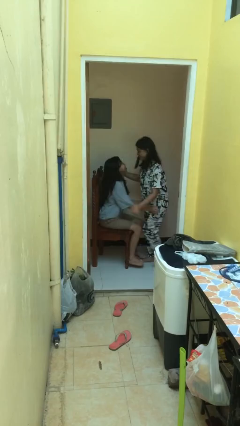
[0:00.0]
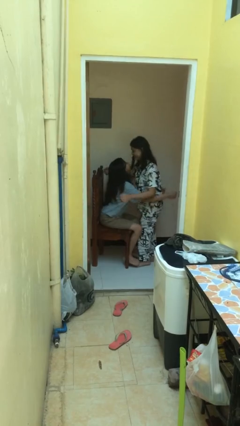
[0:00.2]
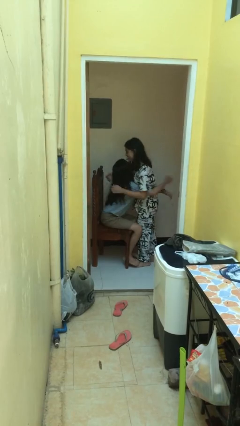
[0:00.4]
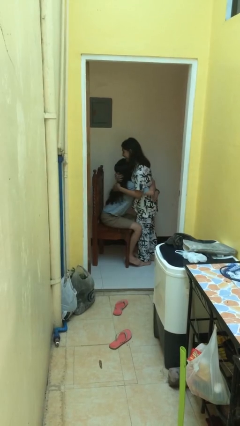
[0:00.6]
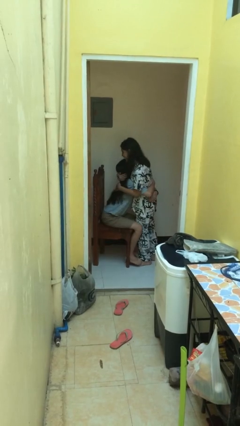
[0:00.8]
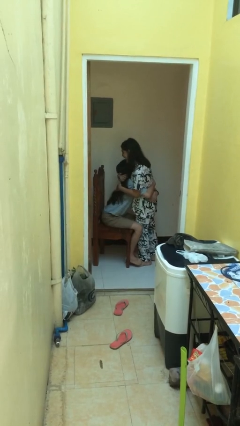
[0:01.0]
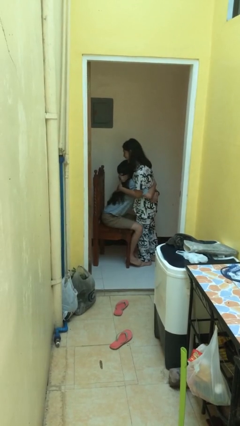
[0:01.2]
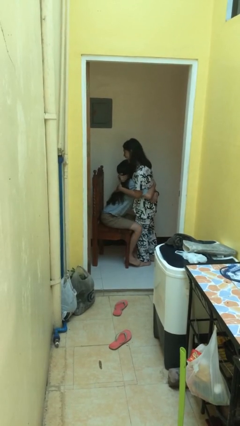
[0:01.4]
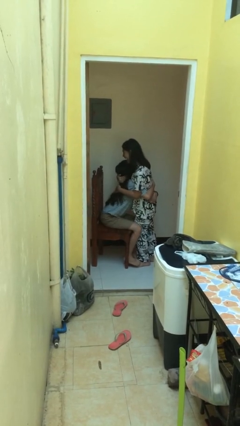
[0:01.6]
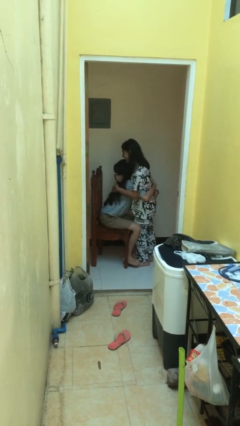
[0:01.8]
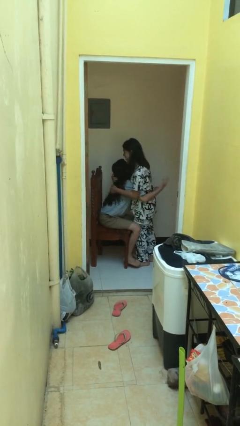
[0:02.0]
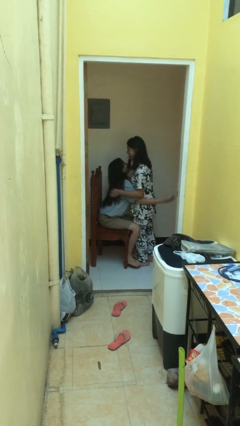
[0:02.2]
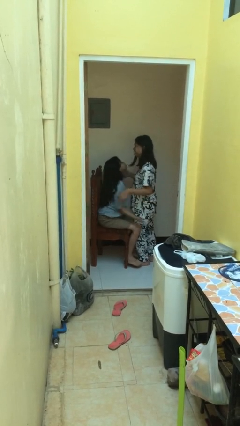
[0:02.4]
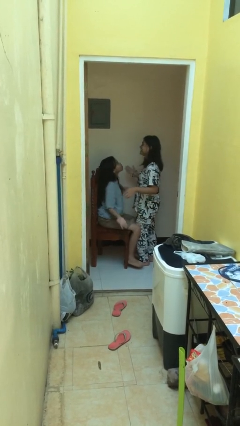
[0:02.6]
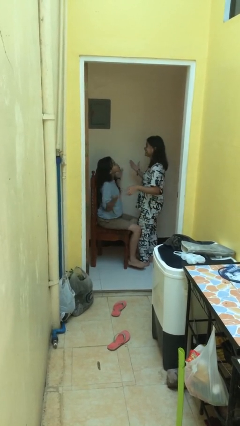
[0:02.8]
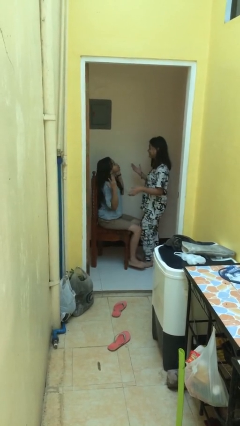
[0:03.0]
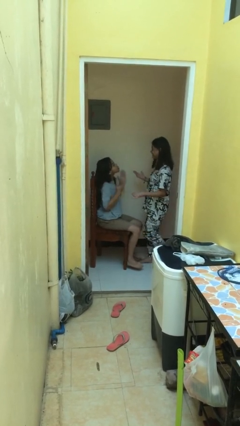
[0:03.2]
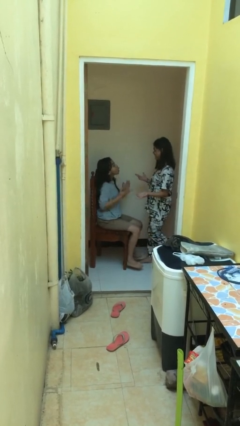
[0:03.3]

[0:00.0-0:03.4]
person embraces person

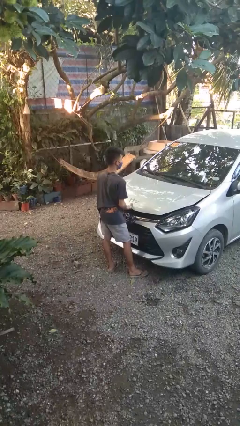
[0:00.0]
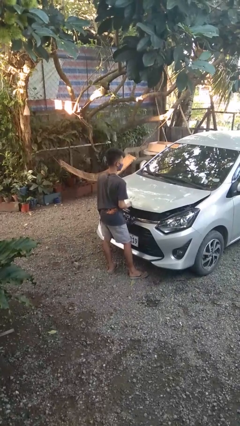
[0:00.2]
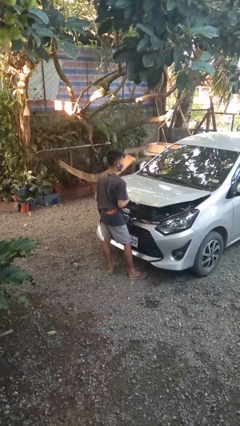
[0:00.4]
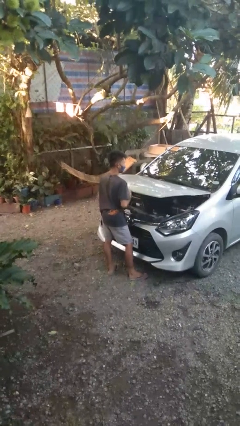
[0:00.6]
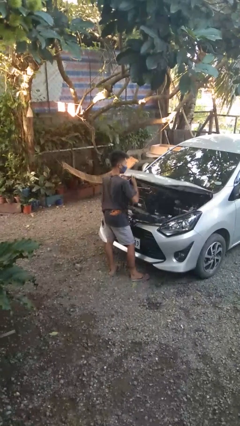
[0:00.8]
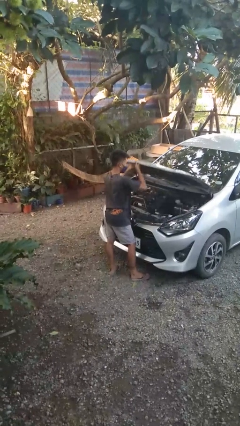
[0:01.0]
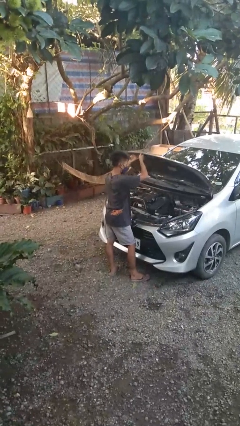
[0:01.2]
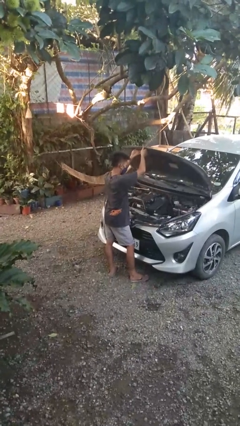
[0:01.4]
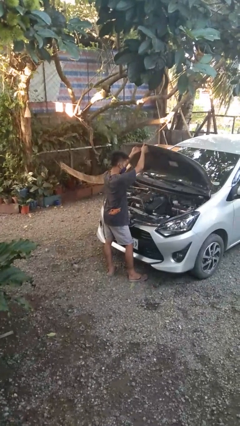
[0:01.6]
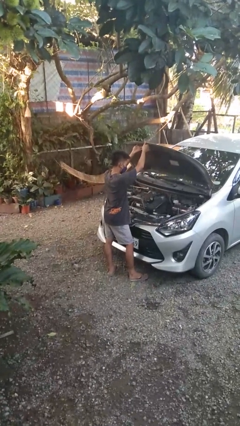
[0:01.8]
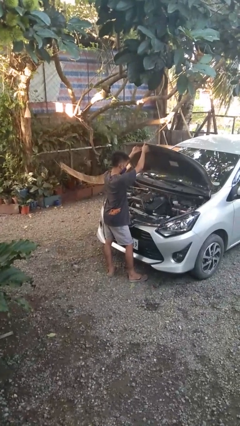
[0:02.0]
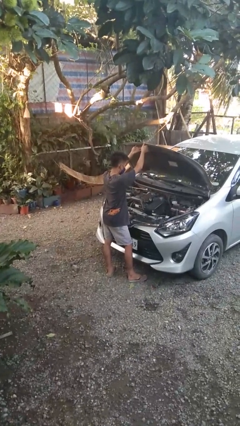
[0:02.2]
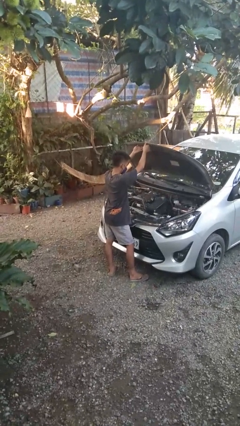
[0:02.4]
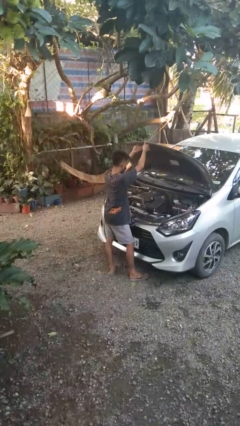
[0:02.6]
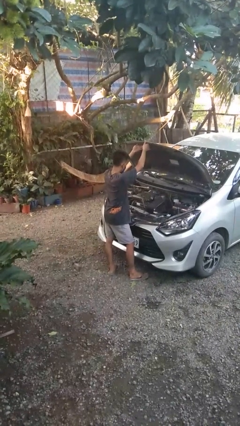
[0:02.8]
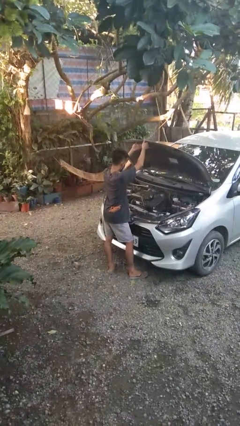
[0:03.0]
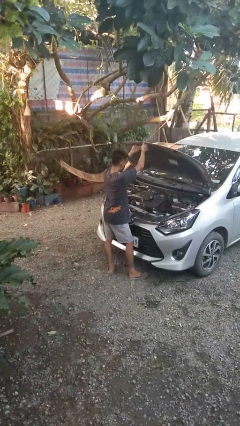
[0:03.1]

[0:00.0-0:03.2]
person opens car hood

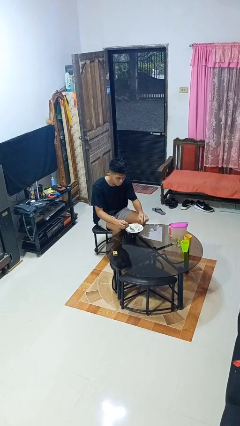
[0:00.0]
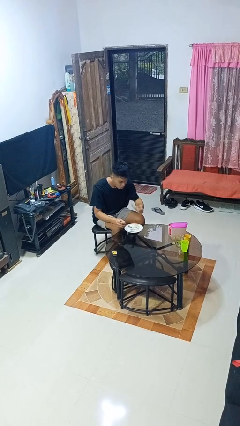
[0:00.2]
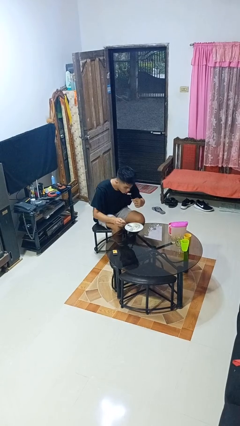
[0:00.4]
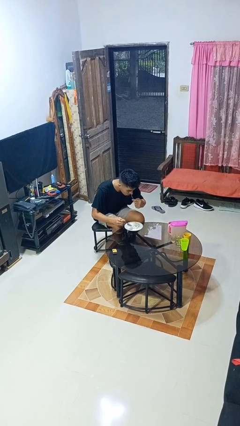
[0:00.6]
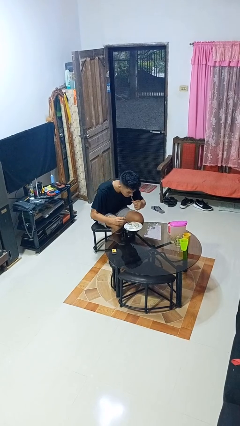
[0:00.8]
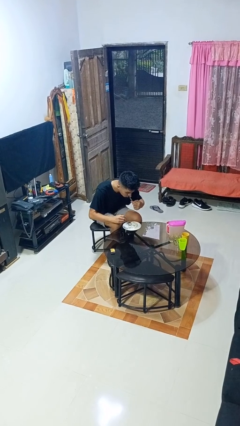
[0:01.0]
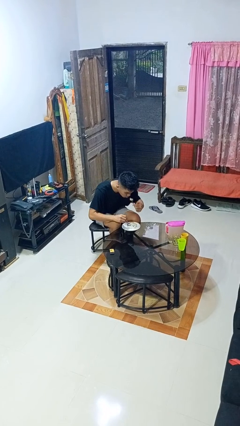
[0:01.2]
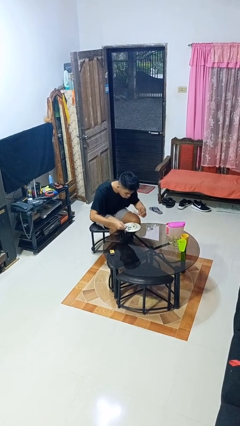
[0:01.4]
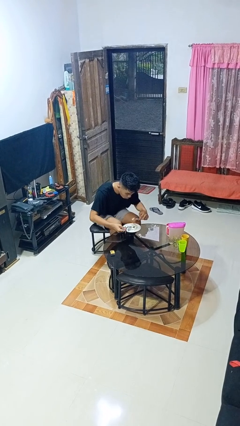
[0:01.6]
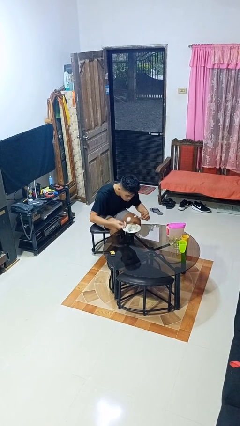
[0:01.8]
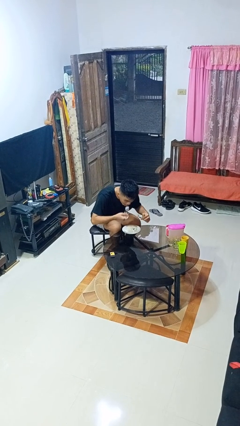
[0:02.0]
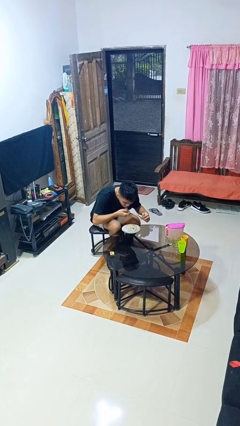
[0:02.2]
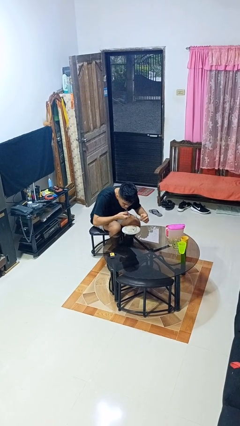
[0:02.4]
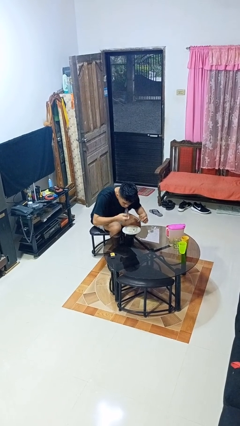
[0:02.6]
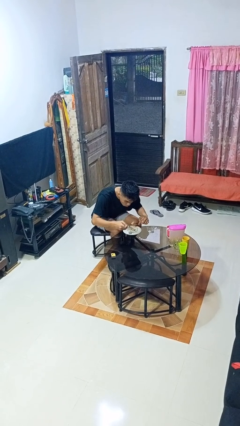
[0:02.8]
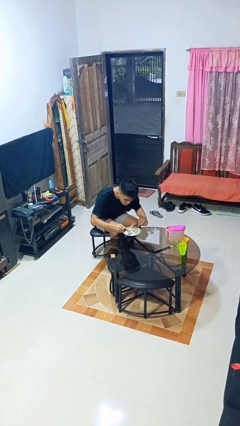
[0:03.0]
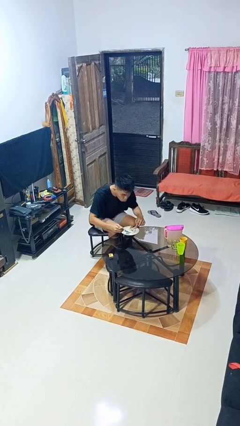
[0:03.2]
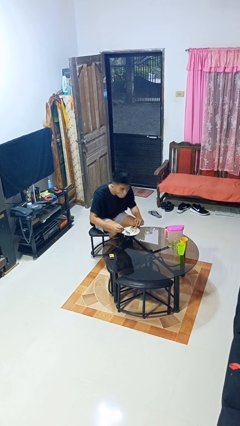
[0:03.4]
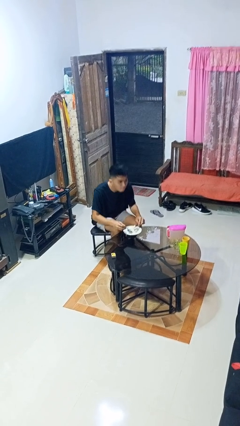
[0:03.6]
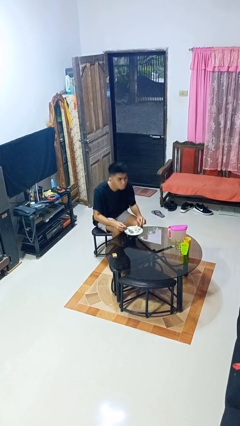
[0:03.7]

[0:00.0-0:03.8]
person eats with utensil

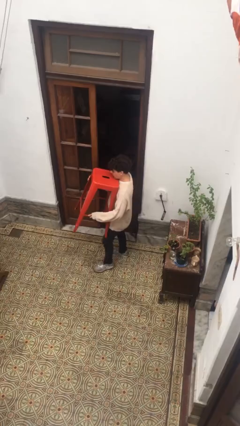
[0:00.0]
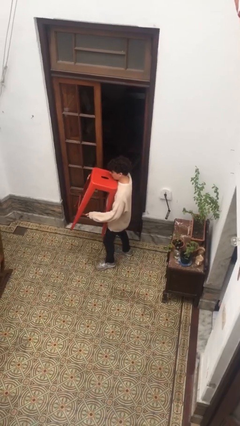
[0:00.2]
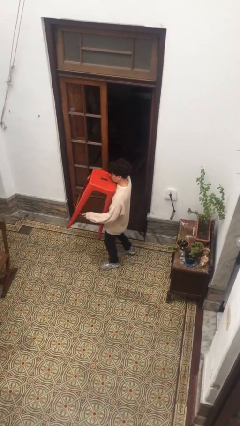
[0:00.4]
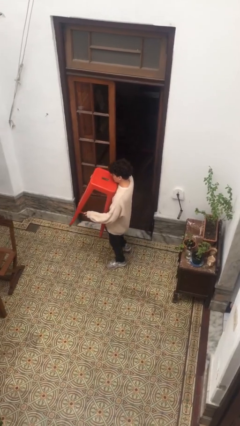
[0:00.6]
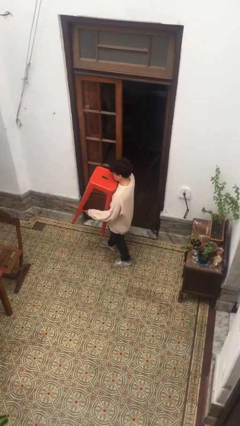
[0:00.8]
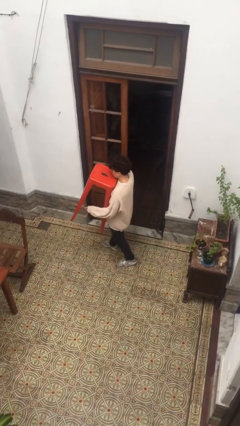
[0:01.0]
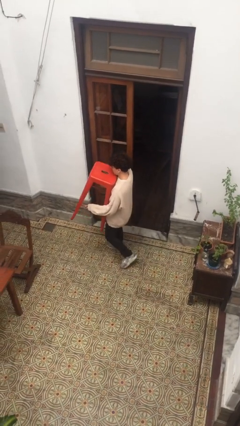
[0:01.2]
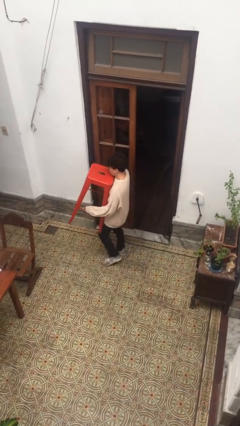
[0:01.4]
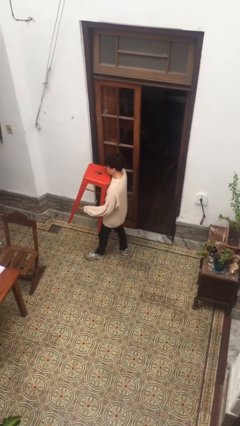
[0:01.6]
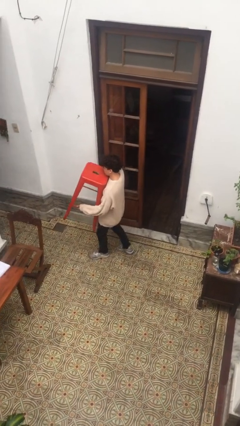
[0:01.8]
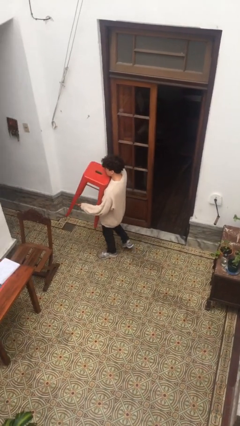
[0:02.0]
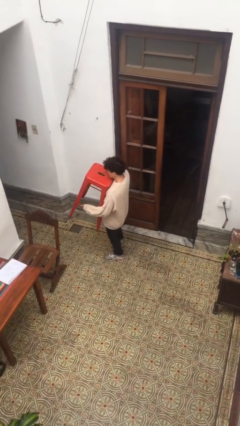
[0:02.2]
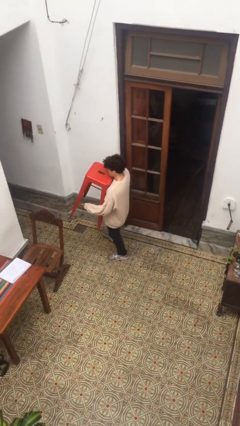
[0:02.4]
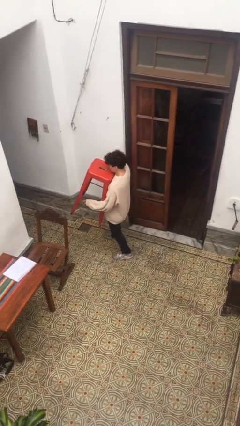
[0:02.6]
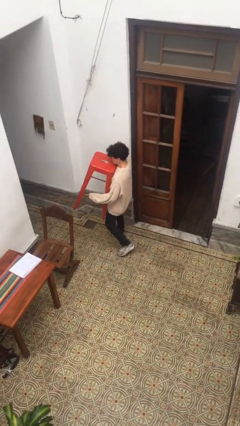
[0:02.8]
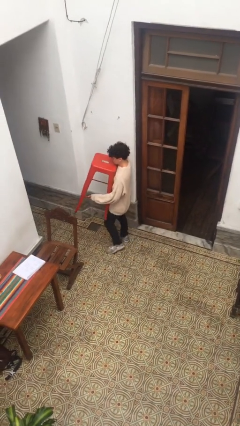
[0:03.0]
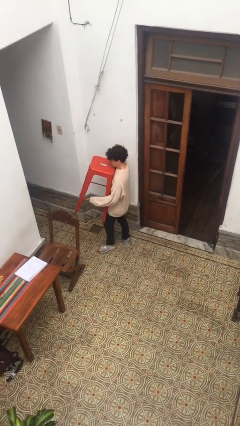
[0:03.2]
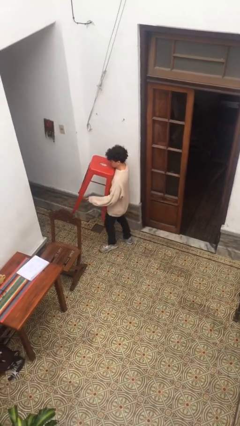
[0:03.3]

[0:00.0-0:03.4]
person carries heavy object

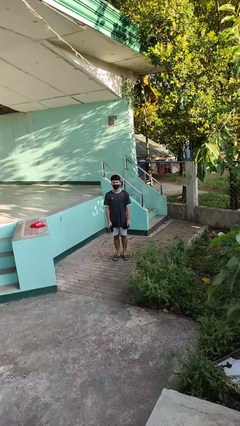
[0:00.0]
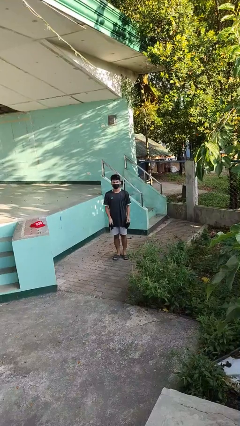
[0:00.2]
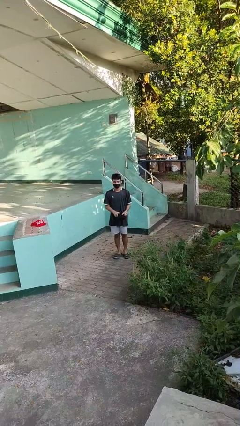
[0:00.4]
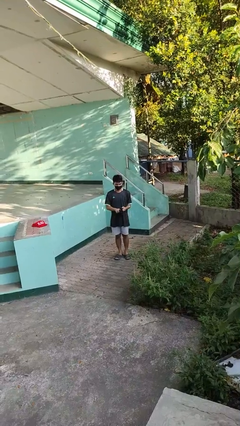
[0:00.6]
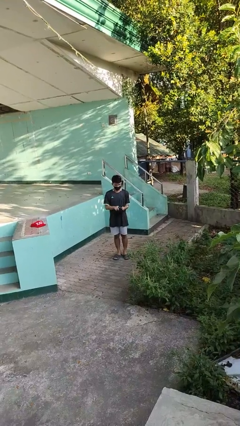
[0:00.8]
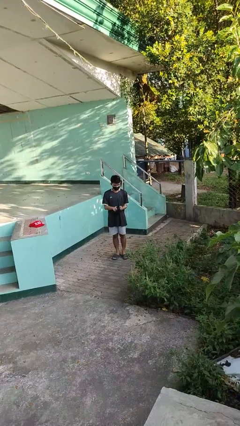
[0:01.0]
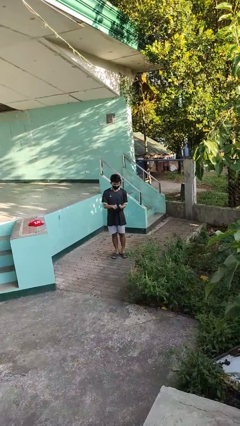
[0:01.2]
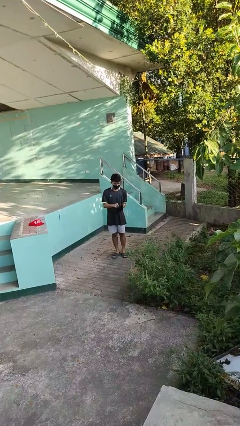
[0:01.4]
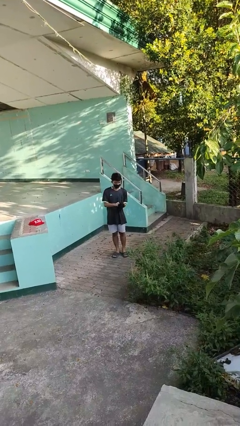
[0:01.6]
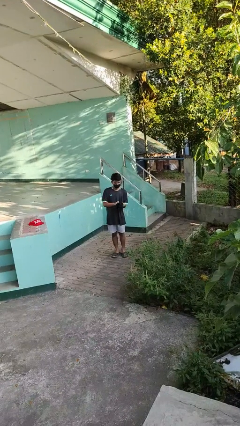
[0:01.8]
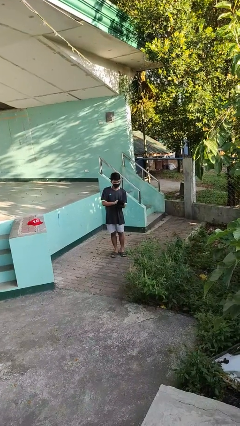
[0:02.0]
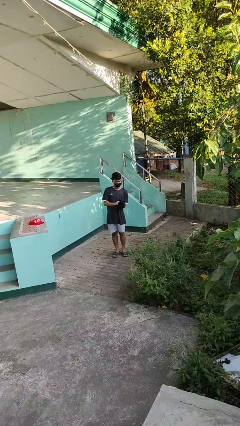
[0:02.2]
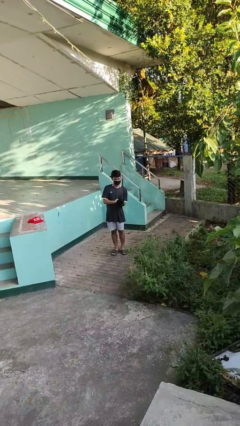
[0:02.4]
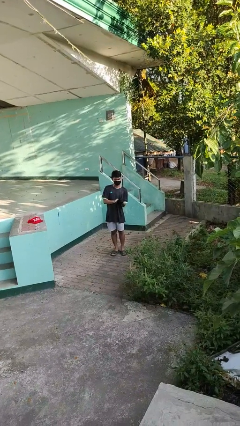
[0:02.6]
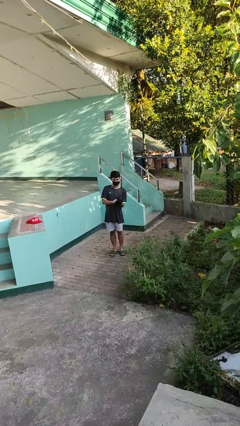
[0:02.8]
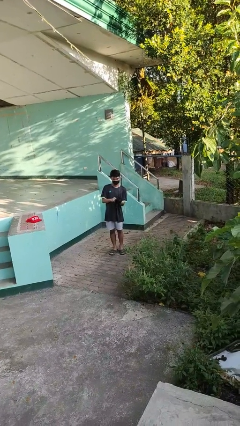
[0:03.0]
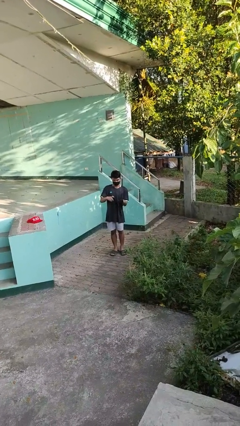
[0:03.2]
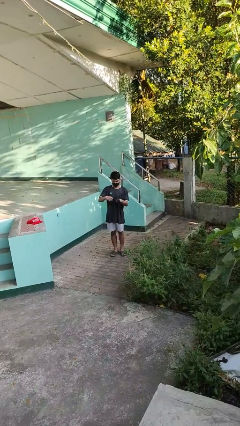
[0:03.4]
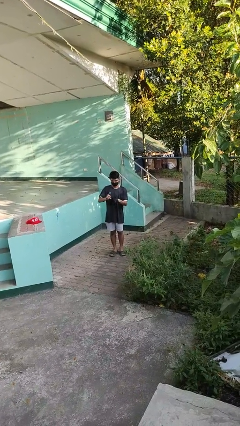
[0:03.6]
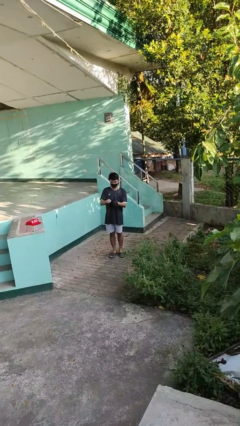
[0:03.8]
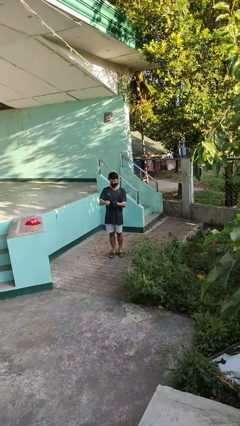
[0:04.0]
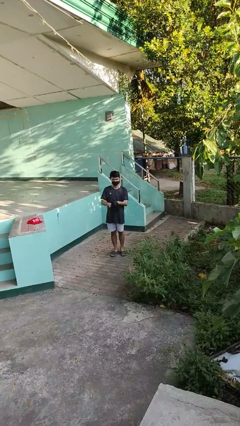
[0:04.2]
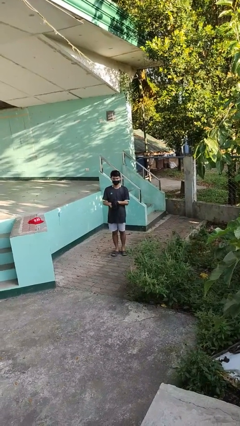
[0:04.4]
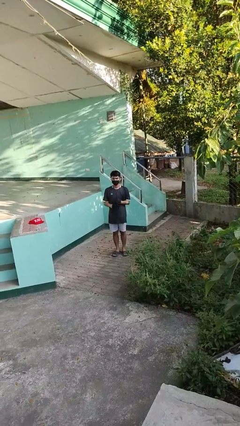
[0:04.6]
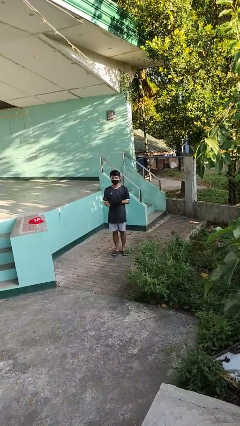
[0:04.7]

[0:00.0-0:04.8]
person puts on gloves
